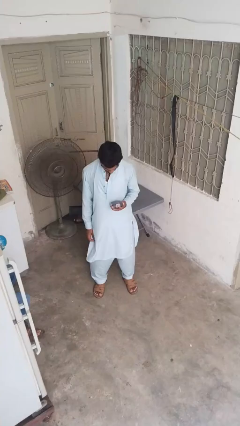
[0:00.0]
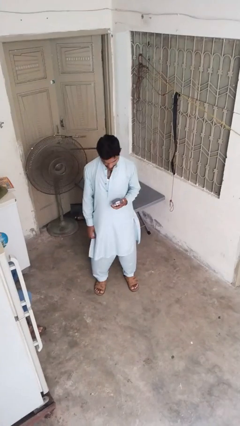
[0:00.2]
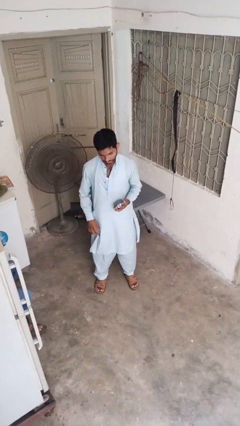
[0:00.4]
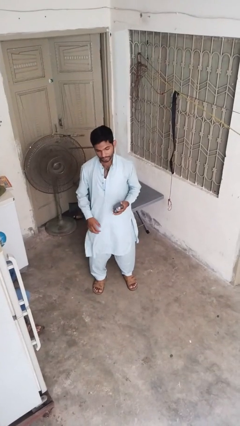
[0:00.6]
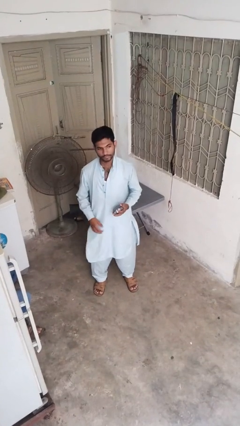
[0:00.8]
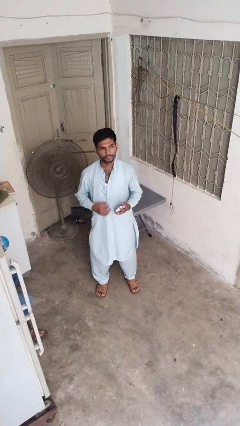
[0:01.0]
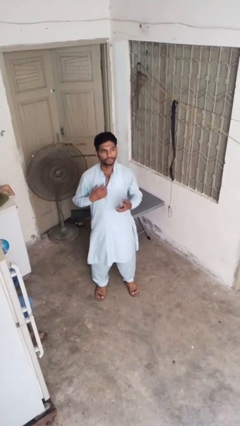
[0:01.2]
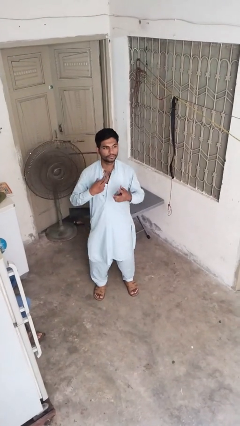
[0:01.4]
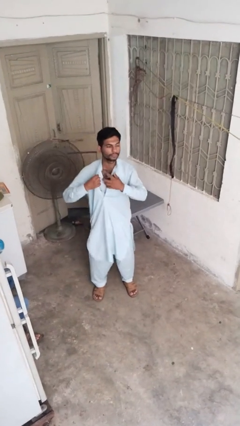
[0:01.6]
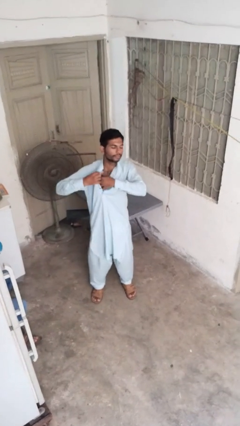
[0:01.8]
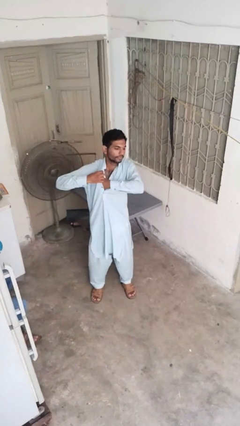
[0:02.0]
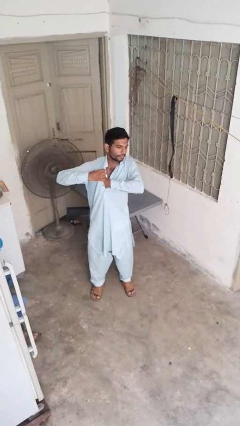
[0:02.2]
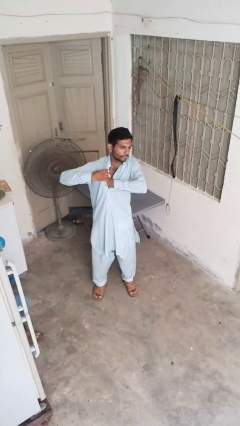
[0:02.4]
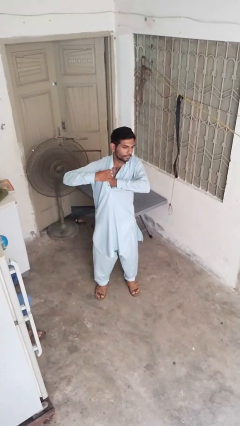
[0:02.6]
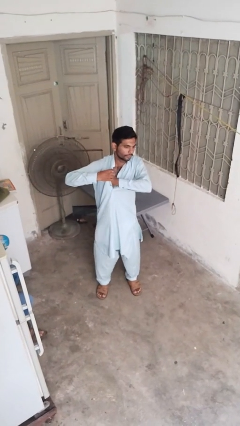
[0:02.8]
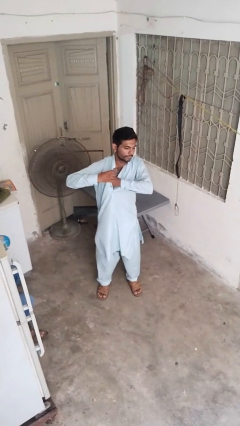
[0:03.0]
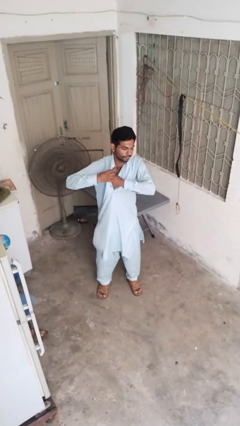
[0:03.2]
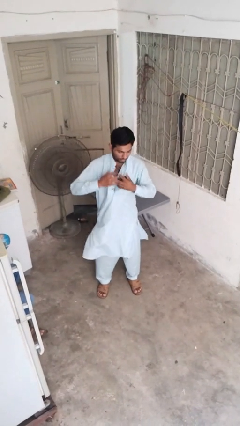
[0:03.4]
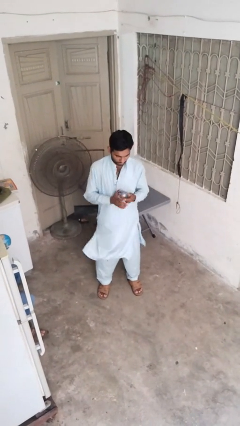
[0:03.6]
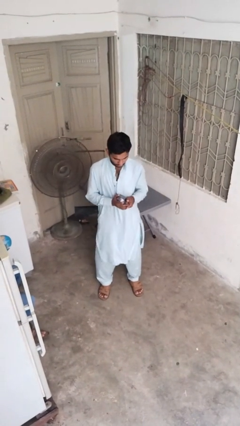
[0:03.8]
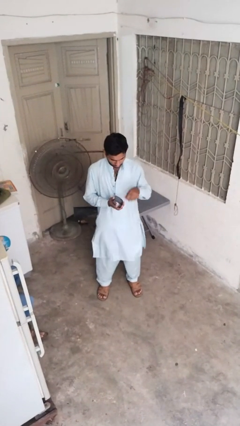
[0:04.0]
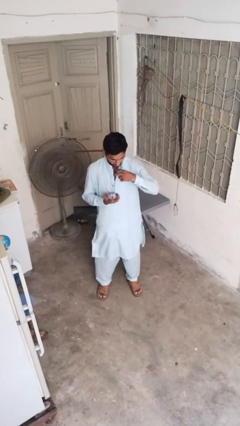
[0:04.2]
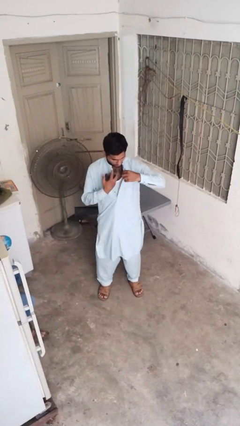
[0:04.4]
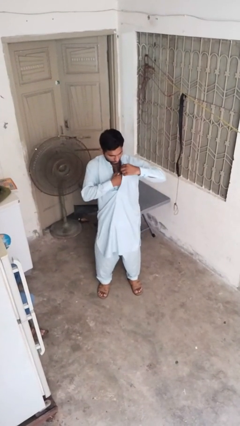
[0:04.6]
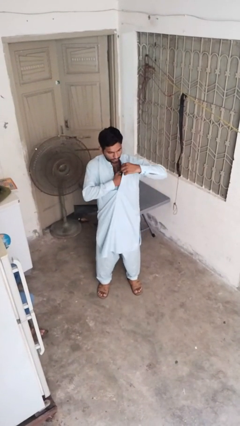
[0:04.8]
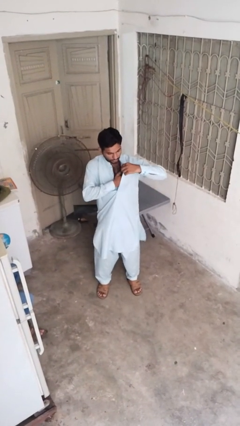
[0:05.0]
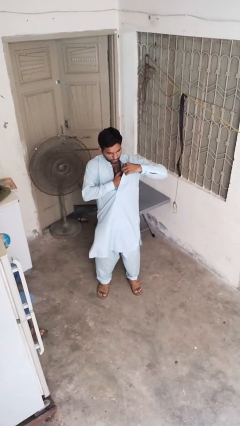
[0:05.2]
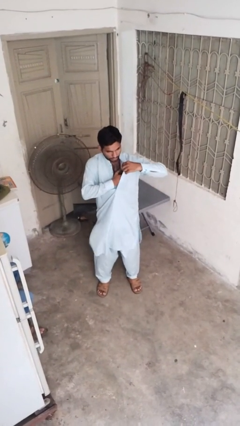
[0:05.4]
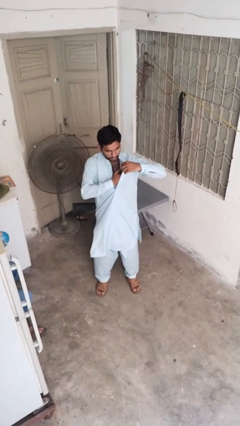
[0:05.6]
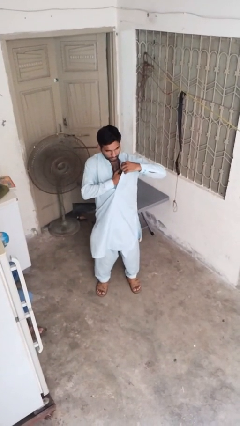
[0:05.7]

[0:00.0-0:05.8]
person applies deodorant

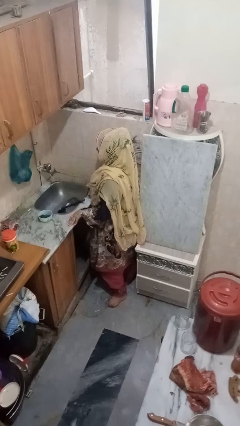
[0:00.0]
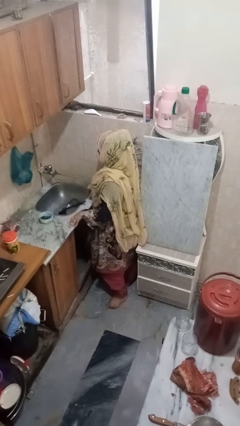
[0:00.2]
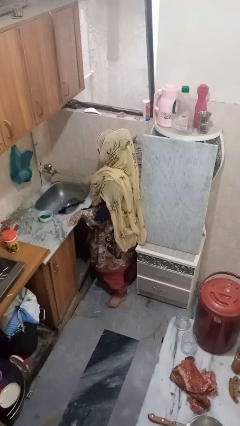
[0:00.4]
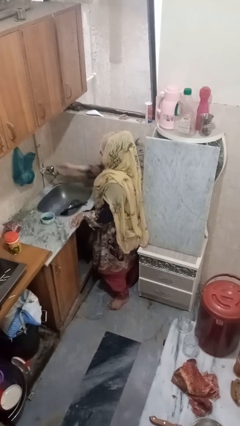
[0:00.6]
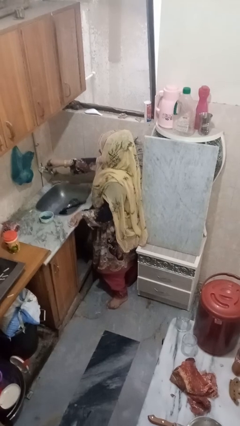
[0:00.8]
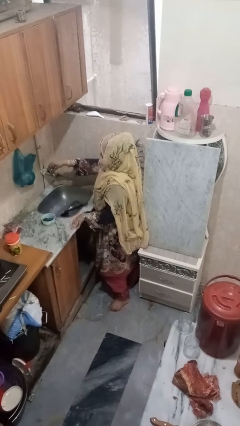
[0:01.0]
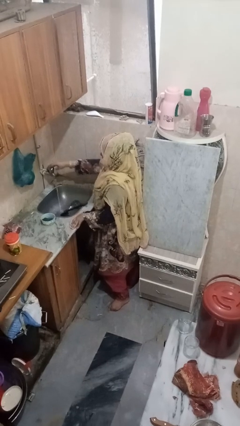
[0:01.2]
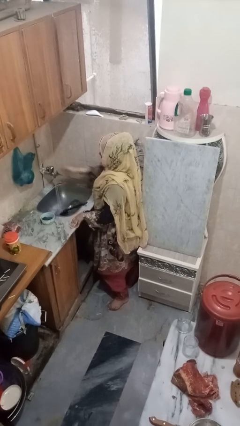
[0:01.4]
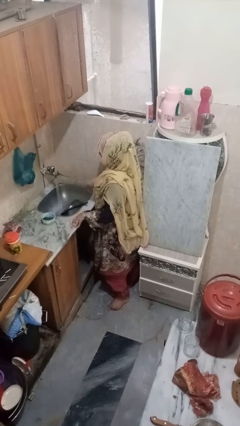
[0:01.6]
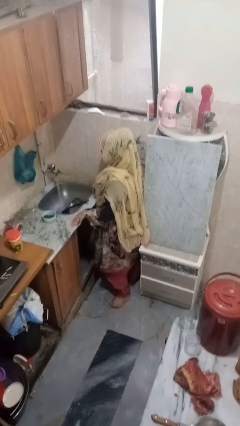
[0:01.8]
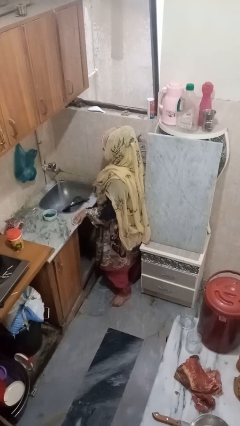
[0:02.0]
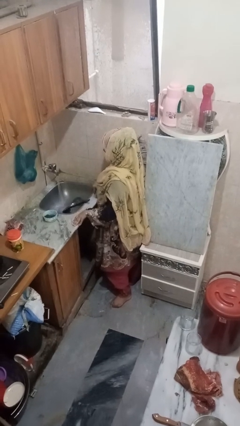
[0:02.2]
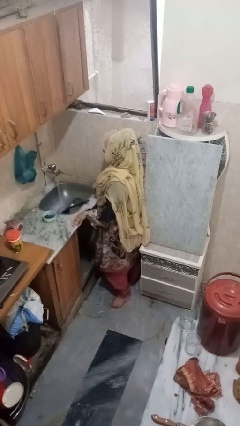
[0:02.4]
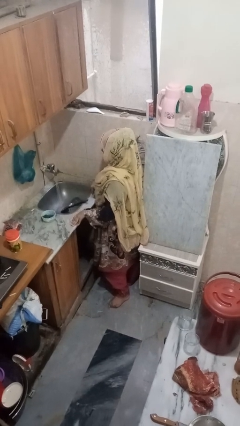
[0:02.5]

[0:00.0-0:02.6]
person turns on faucet

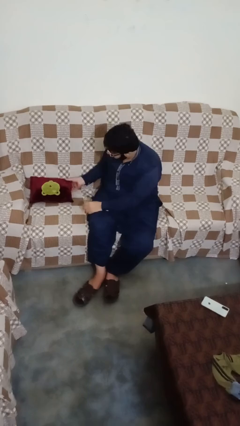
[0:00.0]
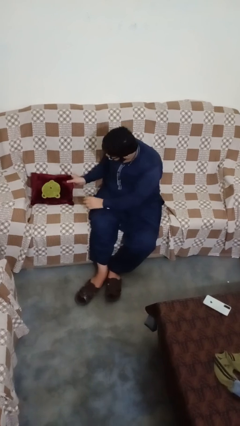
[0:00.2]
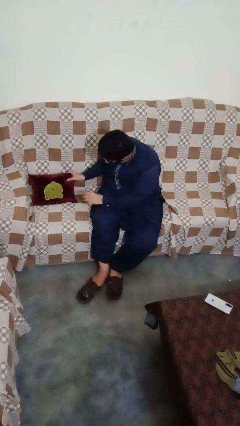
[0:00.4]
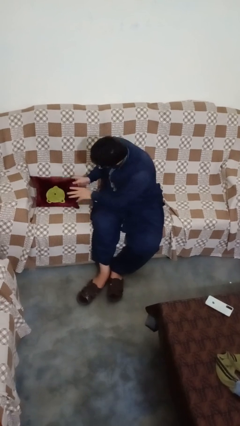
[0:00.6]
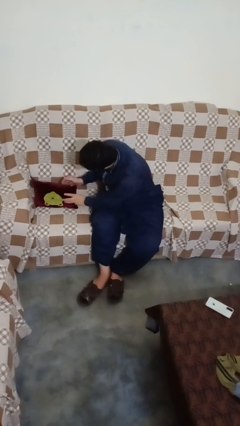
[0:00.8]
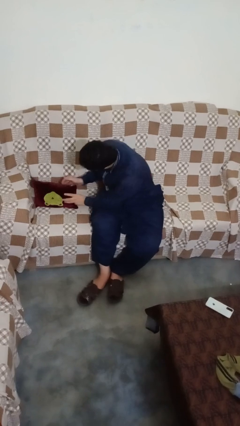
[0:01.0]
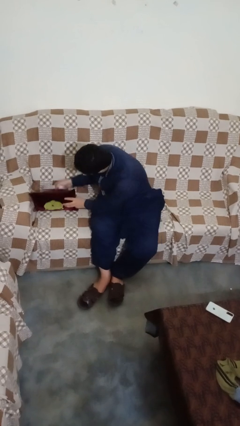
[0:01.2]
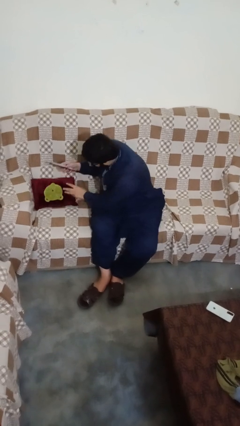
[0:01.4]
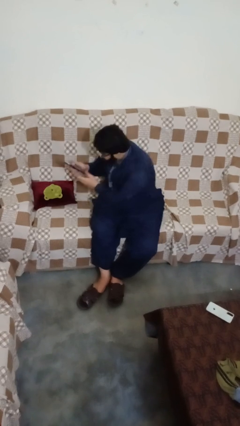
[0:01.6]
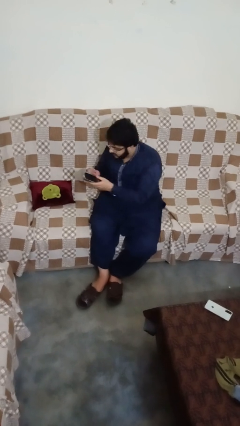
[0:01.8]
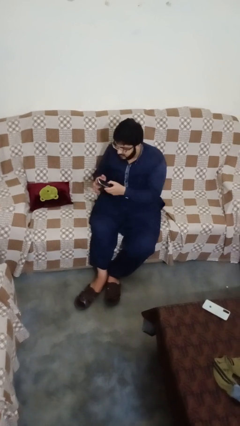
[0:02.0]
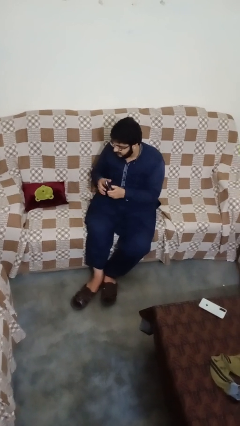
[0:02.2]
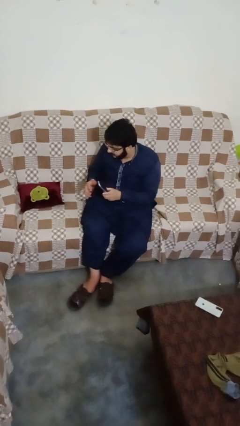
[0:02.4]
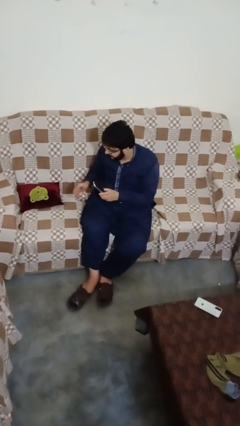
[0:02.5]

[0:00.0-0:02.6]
person searches in couch

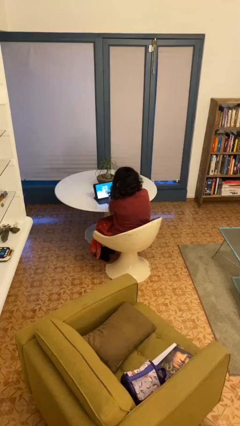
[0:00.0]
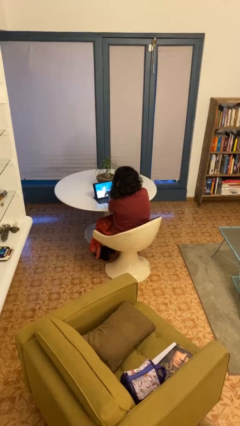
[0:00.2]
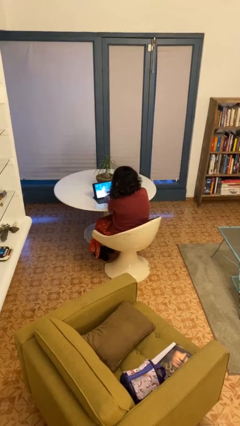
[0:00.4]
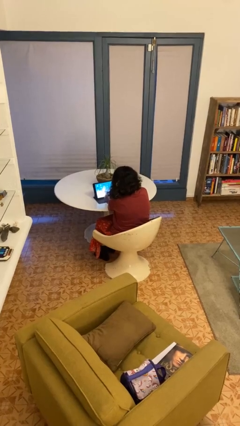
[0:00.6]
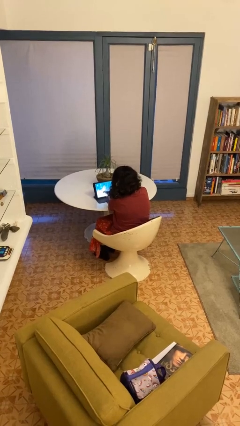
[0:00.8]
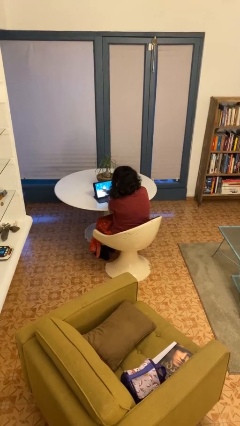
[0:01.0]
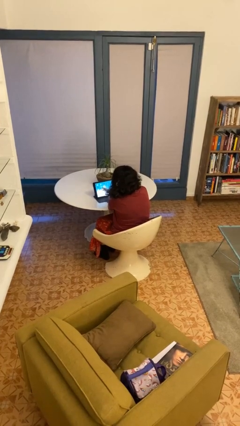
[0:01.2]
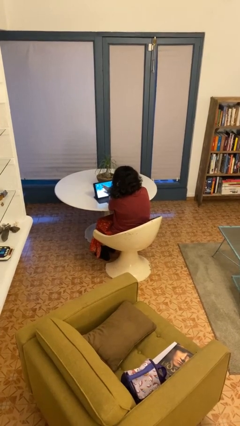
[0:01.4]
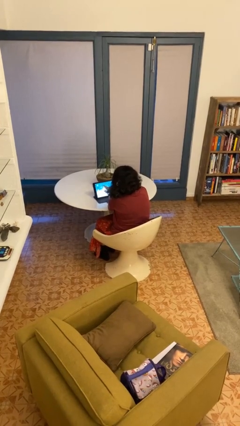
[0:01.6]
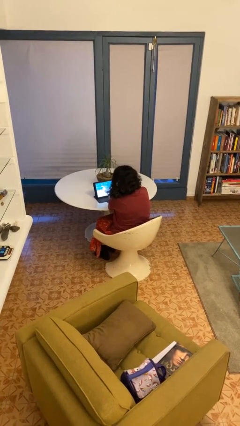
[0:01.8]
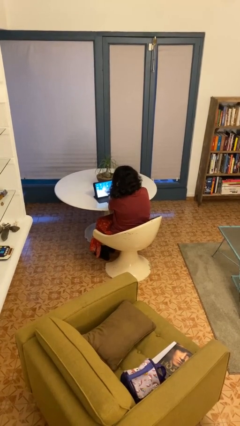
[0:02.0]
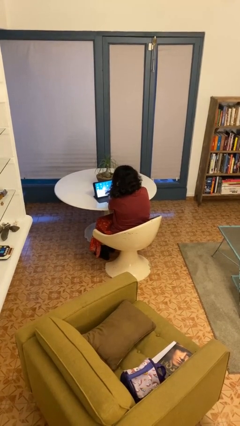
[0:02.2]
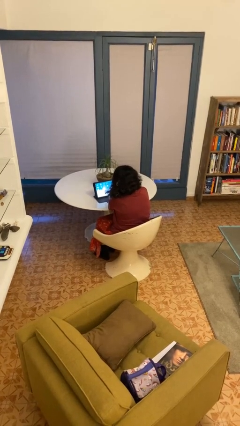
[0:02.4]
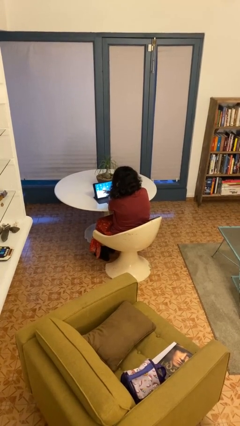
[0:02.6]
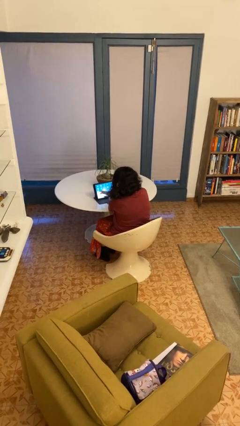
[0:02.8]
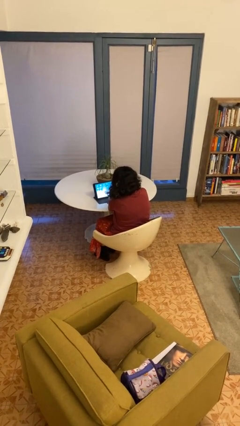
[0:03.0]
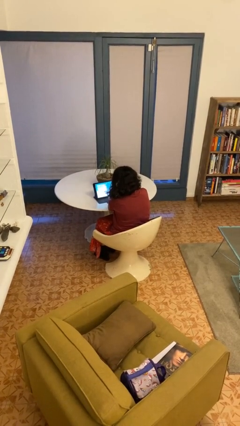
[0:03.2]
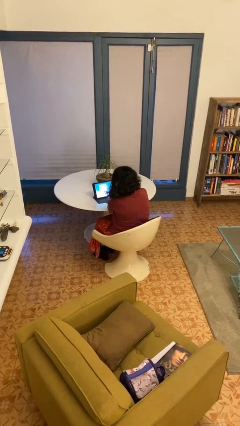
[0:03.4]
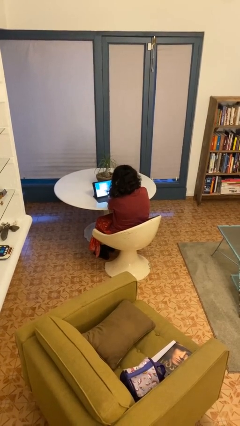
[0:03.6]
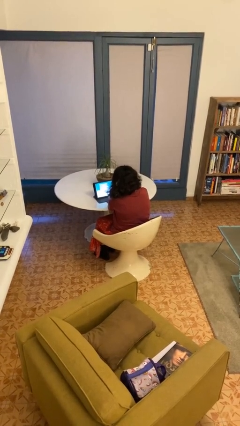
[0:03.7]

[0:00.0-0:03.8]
person interacts with tablet

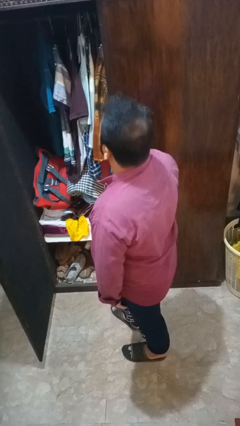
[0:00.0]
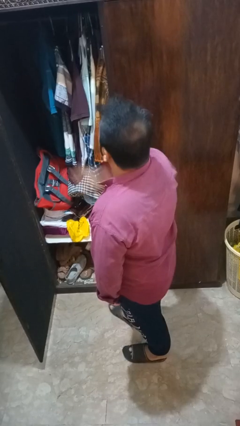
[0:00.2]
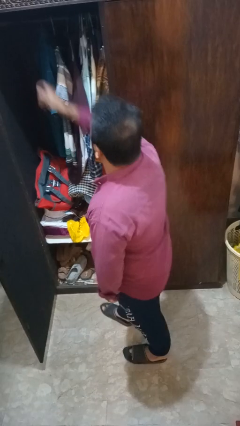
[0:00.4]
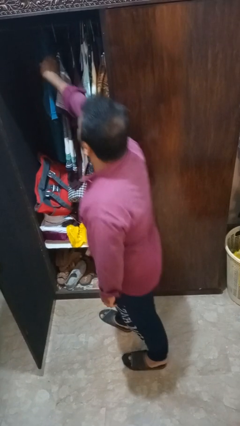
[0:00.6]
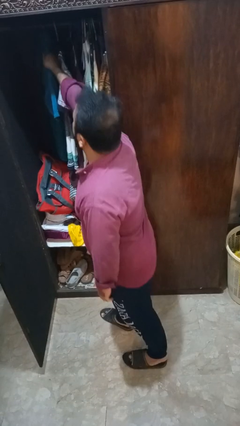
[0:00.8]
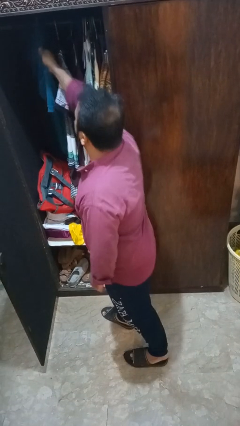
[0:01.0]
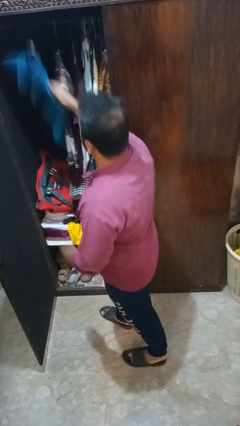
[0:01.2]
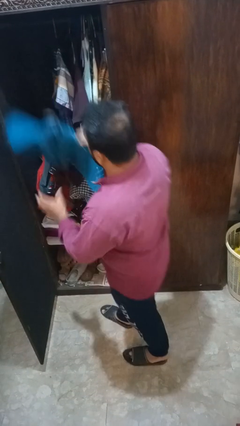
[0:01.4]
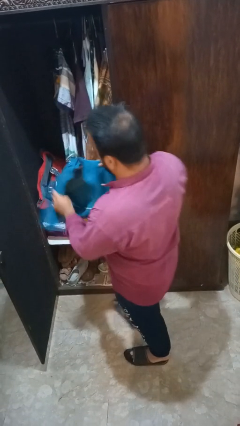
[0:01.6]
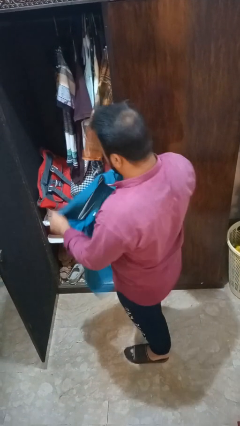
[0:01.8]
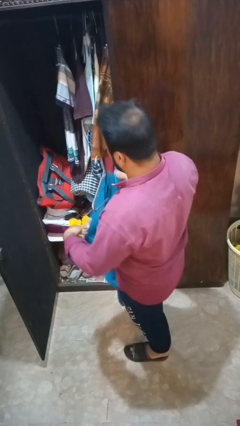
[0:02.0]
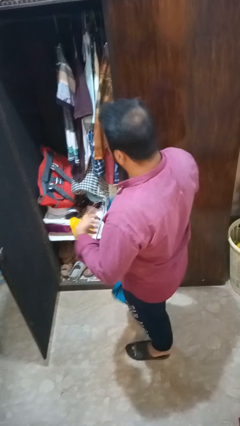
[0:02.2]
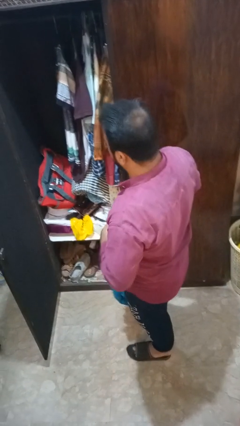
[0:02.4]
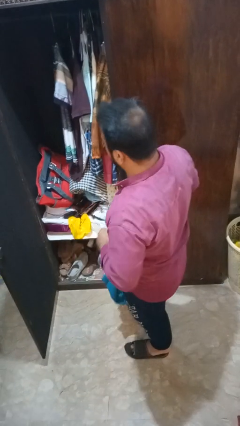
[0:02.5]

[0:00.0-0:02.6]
person takes clothes from closet
